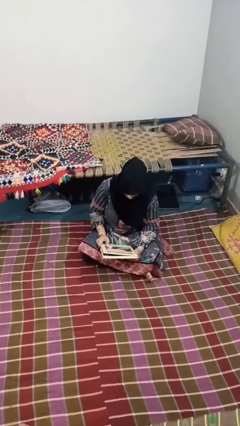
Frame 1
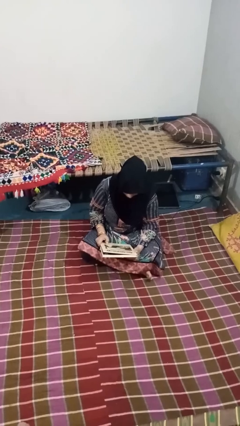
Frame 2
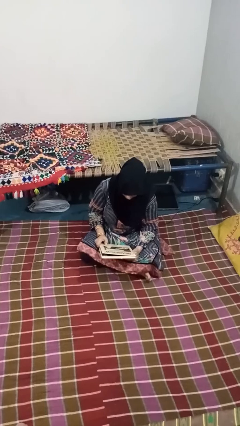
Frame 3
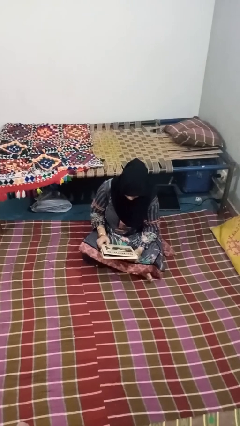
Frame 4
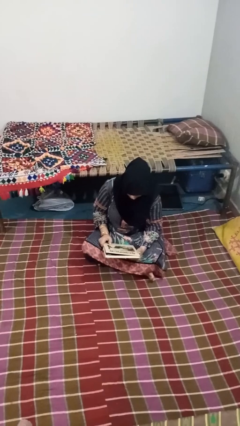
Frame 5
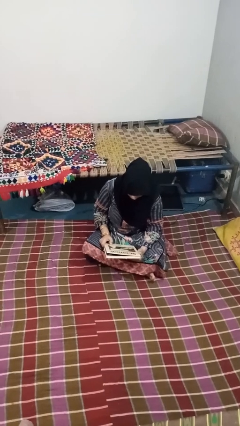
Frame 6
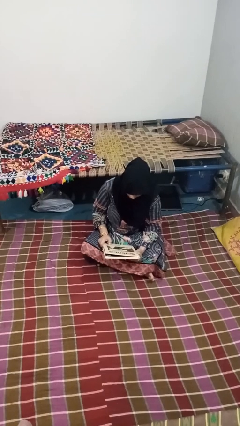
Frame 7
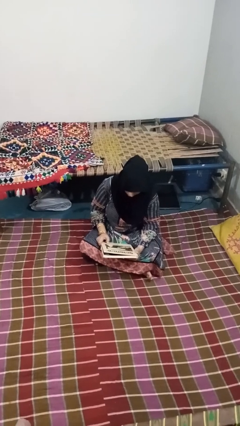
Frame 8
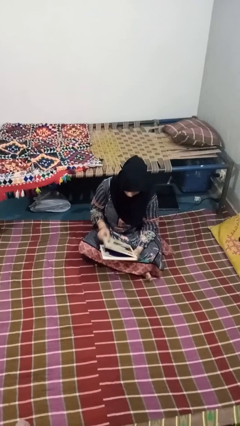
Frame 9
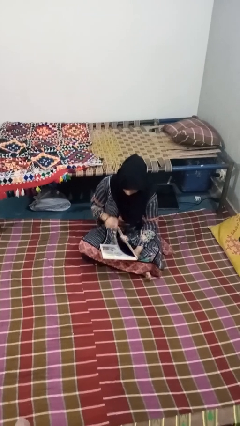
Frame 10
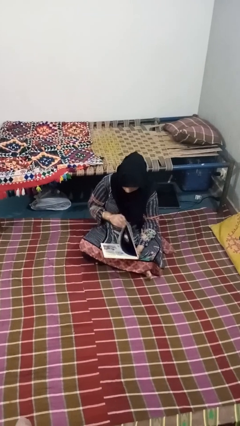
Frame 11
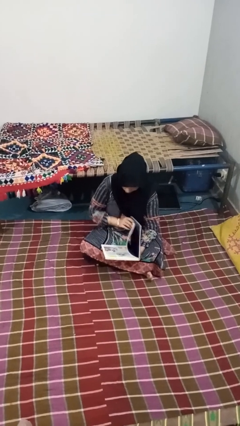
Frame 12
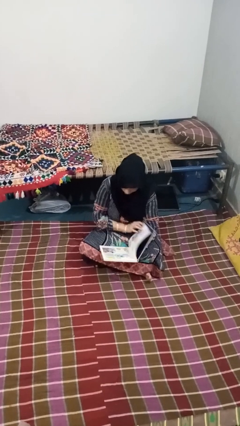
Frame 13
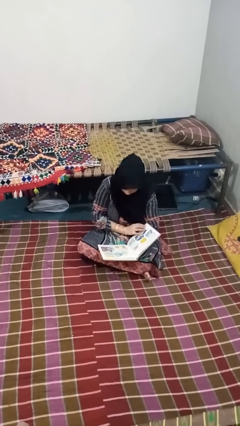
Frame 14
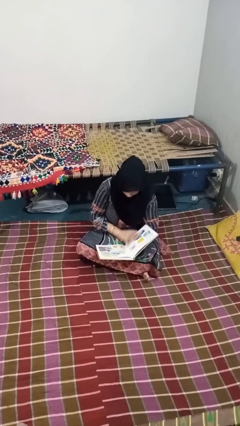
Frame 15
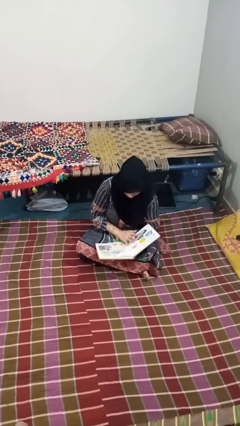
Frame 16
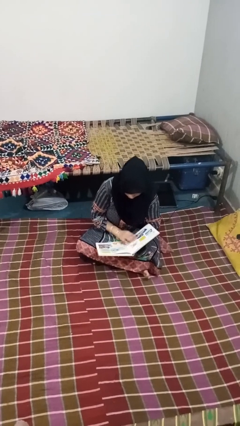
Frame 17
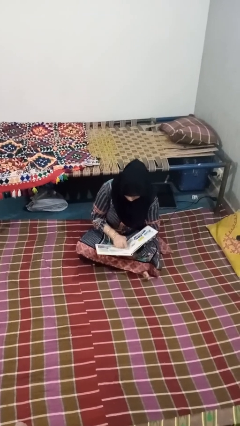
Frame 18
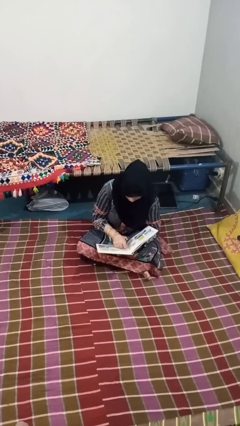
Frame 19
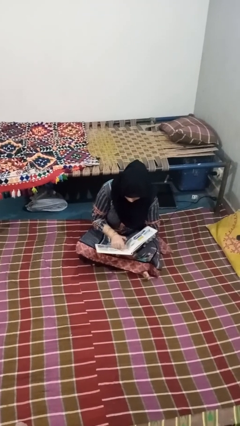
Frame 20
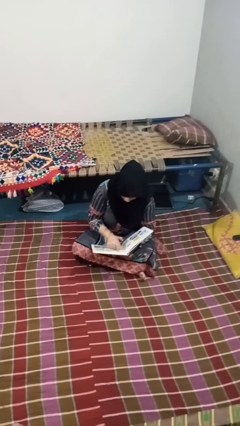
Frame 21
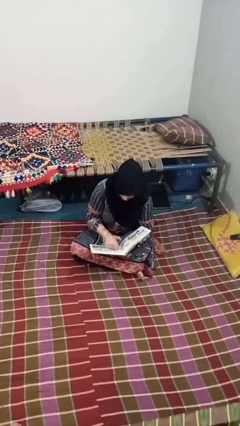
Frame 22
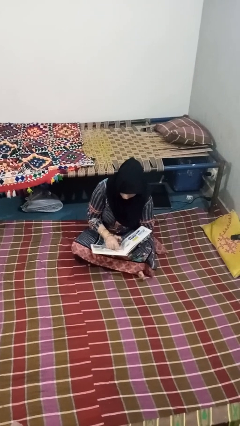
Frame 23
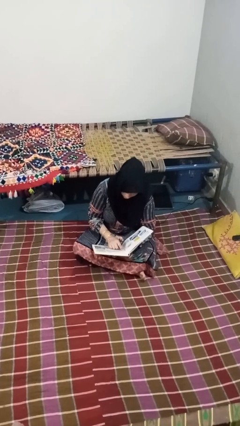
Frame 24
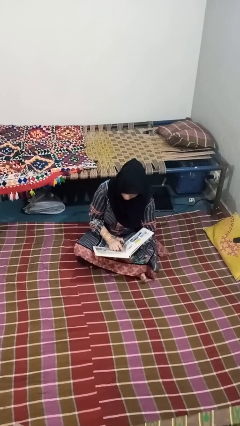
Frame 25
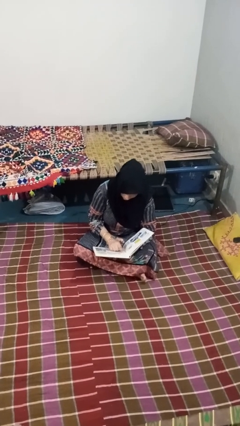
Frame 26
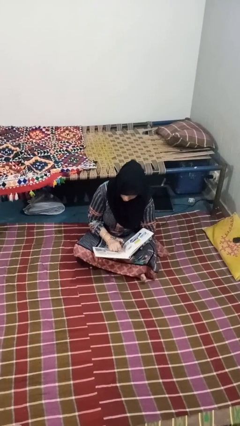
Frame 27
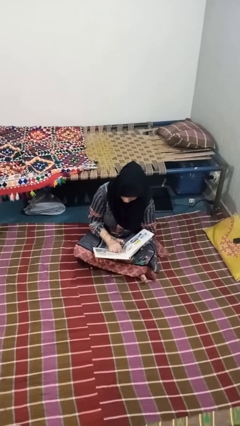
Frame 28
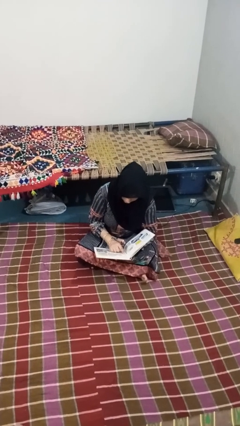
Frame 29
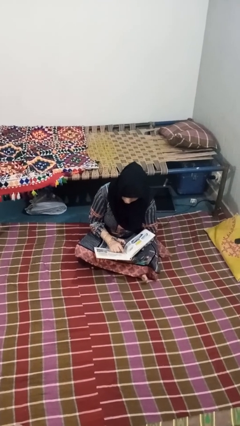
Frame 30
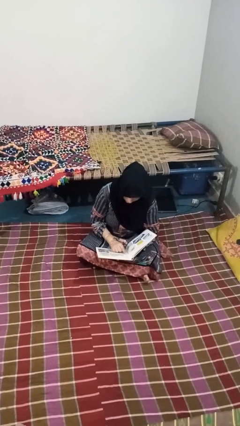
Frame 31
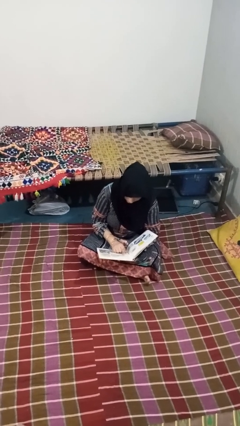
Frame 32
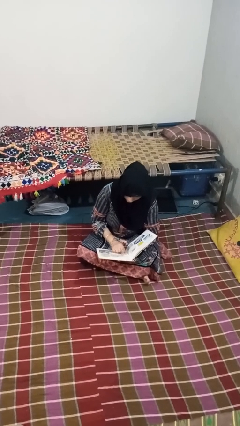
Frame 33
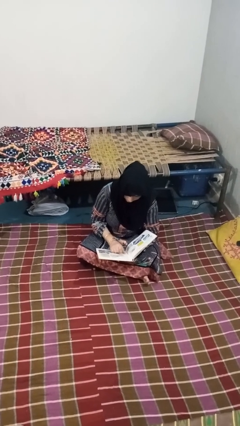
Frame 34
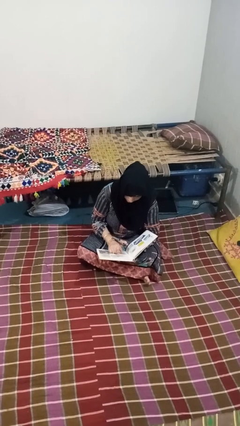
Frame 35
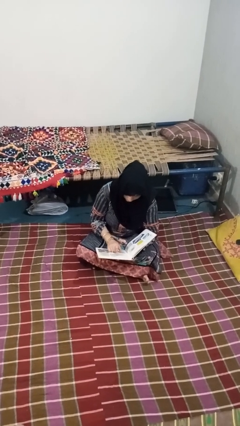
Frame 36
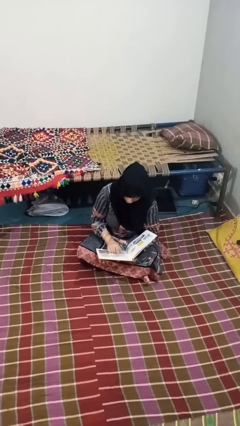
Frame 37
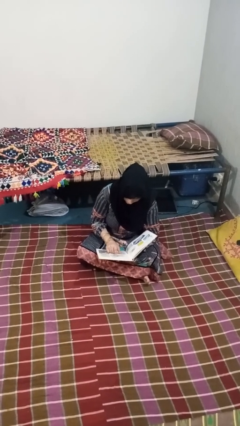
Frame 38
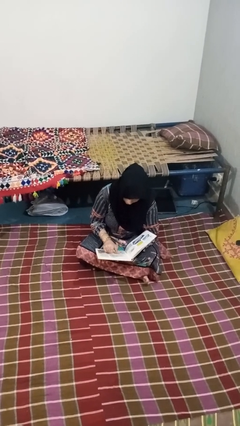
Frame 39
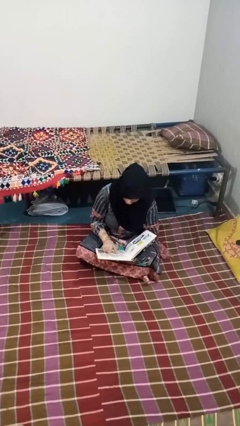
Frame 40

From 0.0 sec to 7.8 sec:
person reads magazine

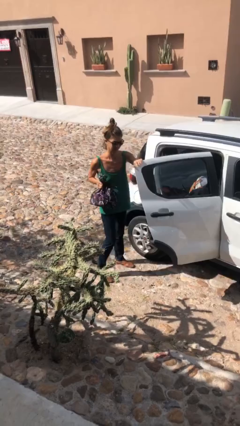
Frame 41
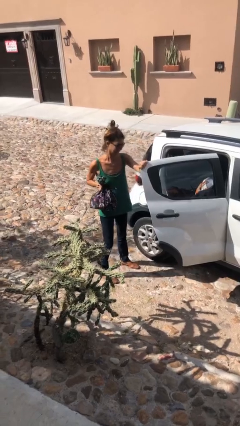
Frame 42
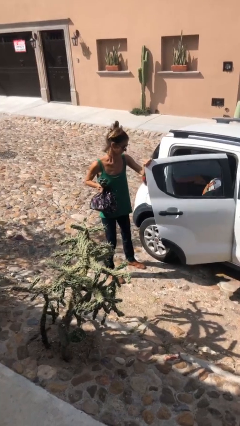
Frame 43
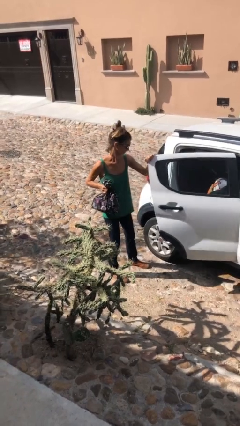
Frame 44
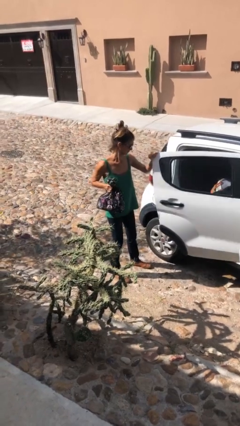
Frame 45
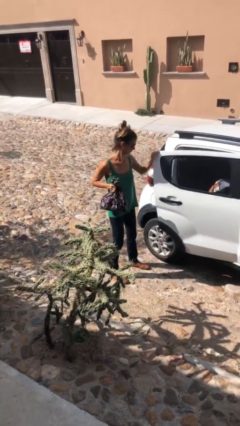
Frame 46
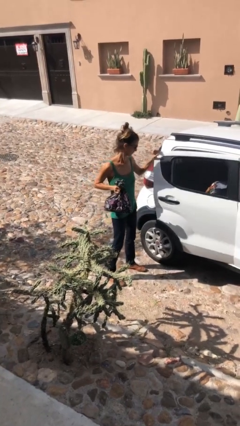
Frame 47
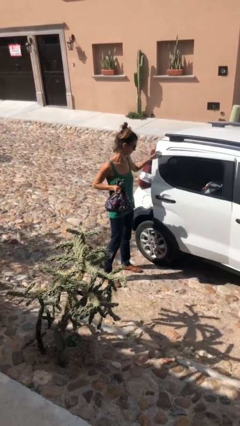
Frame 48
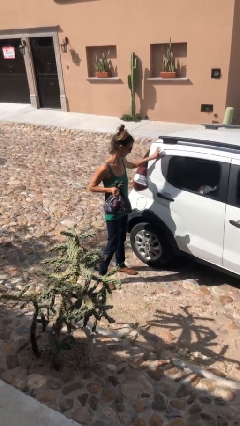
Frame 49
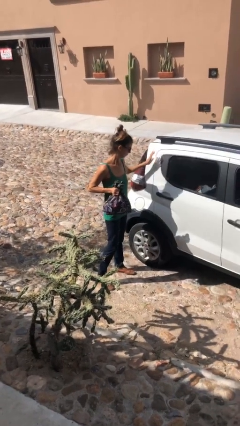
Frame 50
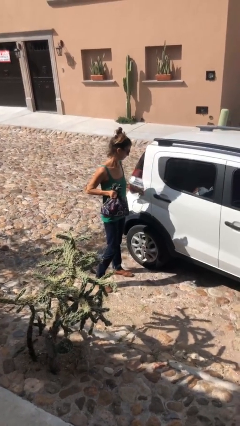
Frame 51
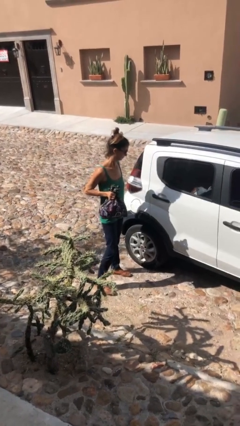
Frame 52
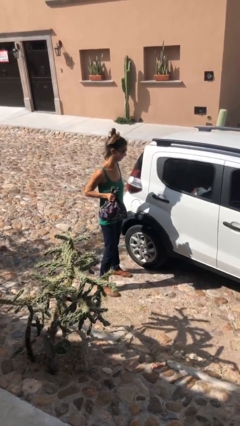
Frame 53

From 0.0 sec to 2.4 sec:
person closes car door

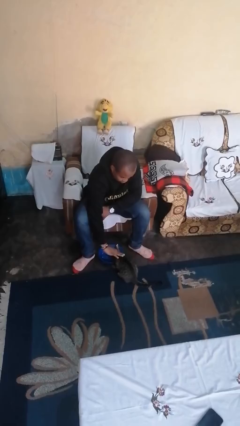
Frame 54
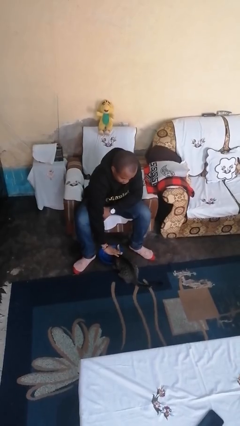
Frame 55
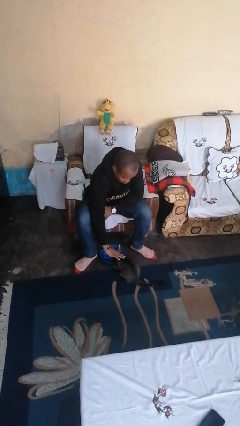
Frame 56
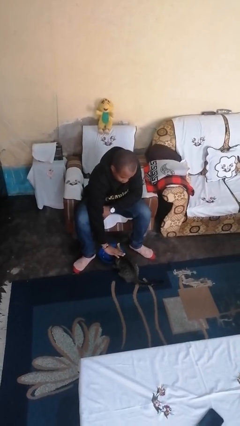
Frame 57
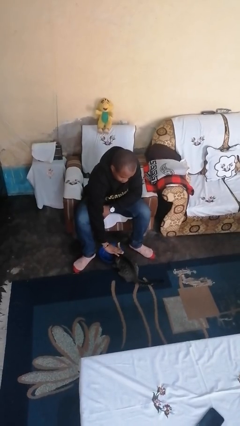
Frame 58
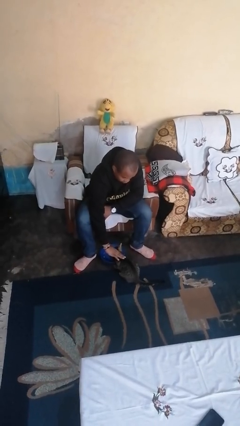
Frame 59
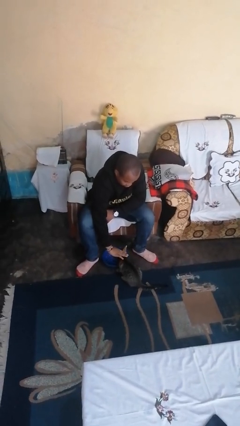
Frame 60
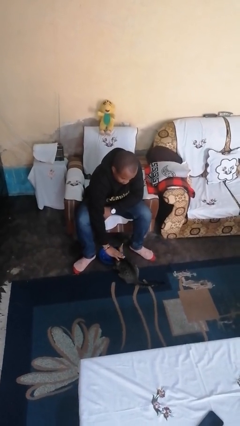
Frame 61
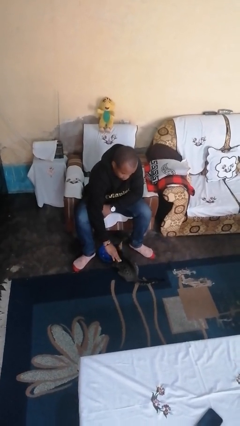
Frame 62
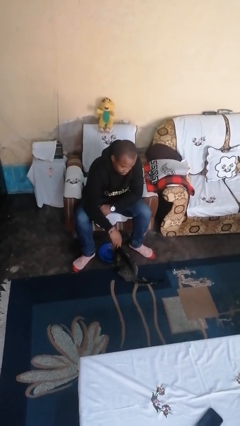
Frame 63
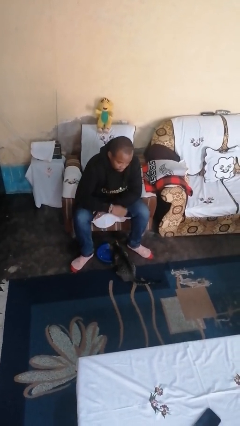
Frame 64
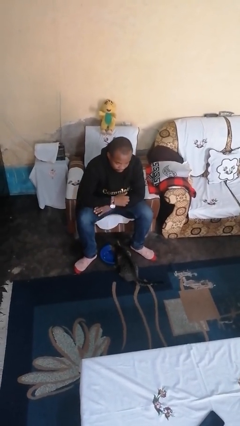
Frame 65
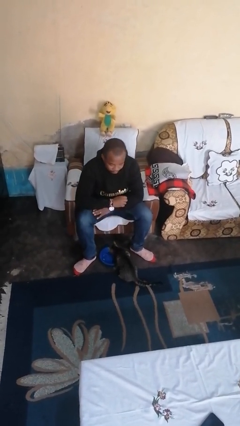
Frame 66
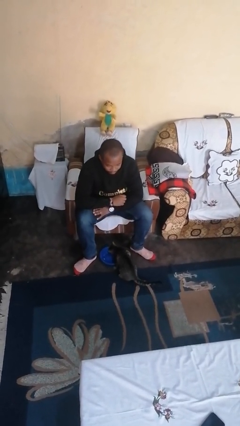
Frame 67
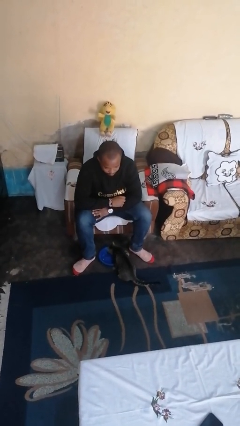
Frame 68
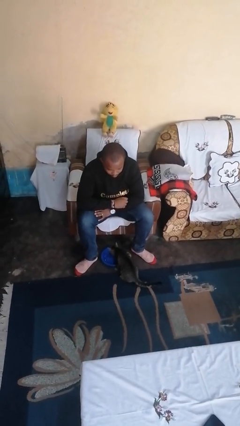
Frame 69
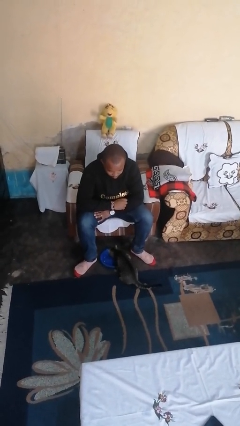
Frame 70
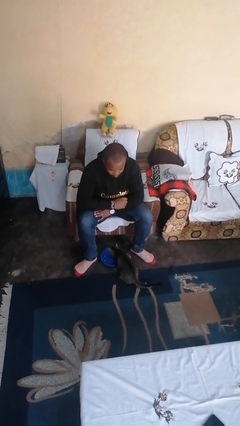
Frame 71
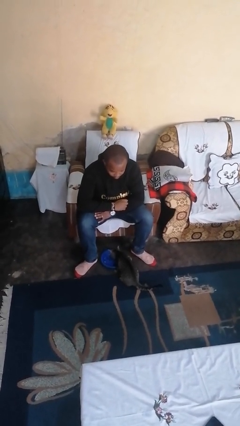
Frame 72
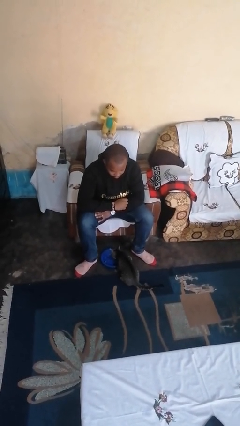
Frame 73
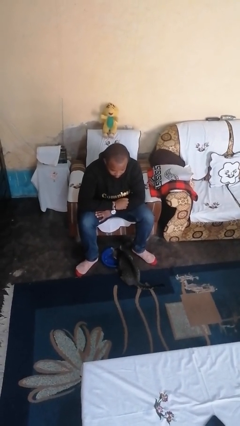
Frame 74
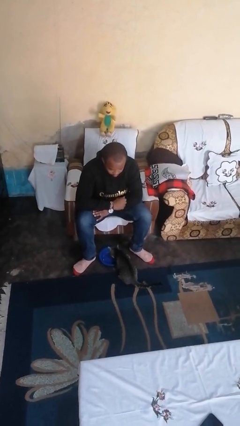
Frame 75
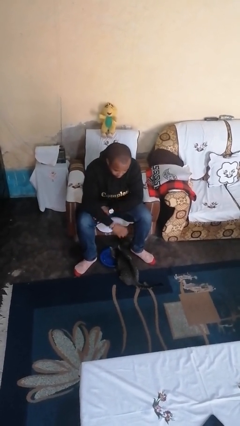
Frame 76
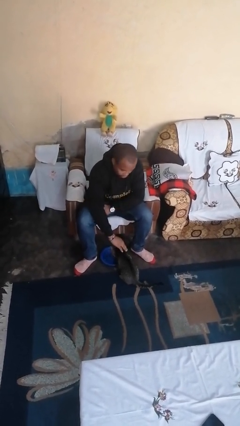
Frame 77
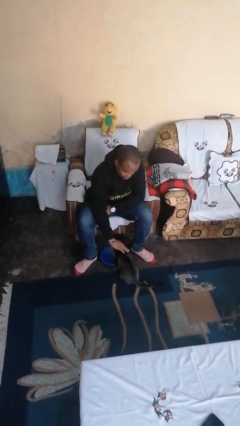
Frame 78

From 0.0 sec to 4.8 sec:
person hugs cat

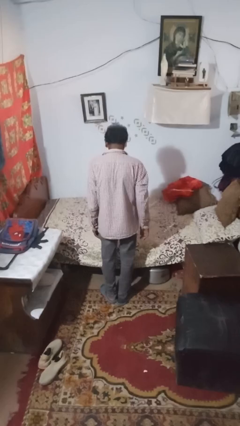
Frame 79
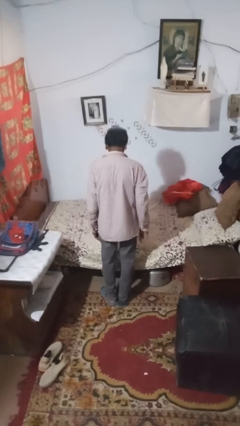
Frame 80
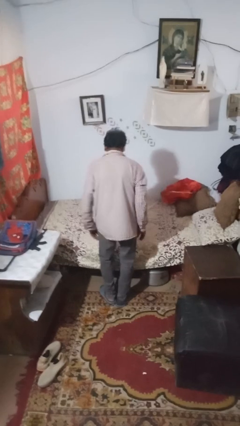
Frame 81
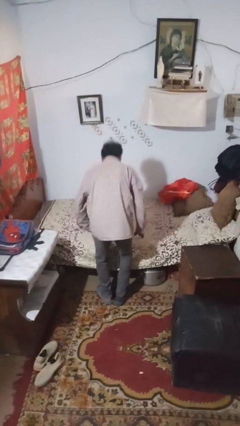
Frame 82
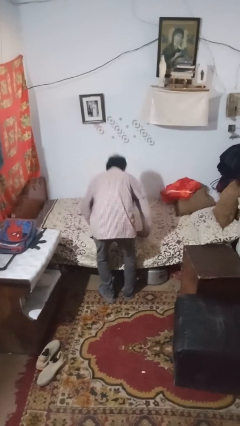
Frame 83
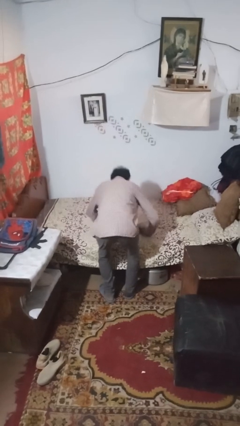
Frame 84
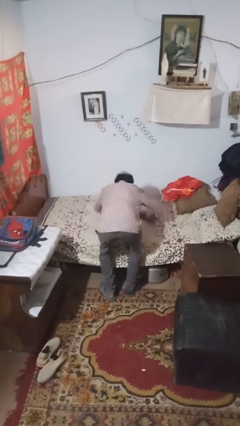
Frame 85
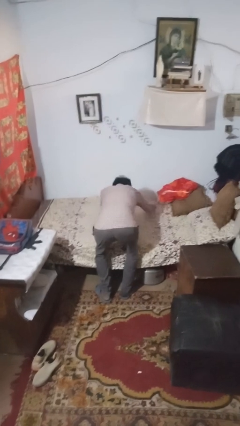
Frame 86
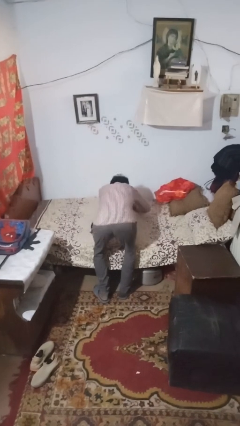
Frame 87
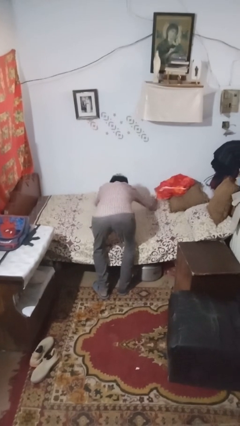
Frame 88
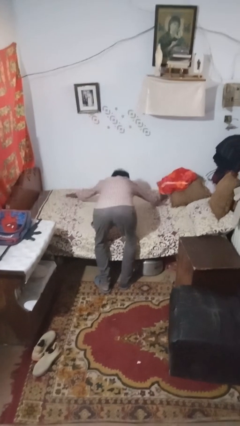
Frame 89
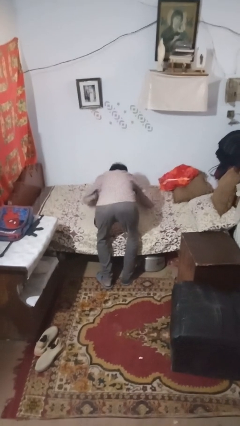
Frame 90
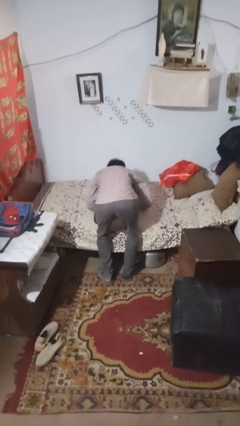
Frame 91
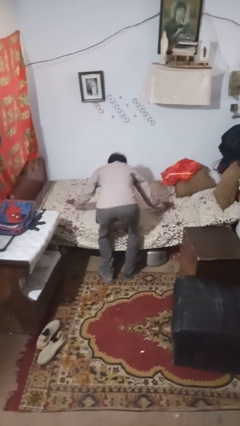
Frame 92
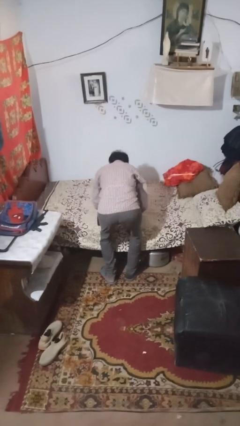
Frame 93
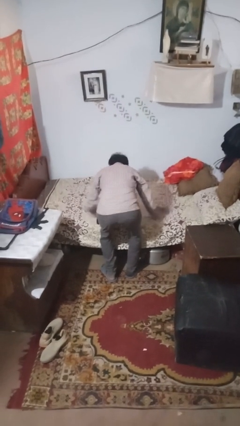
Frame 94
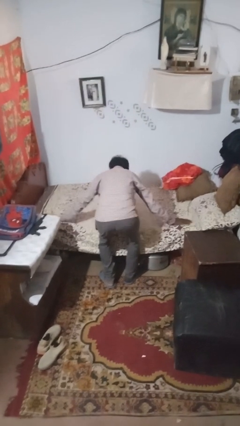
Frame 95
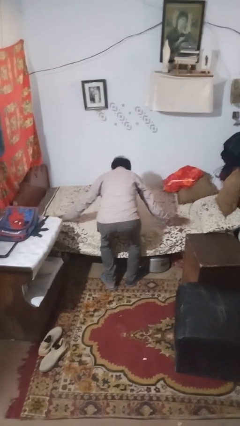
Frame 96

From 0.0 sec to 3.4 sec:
person makes bed
